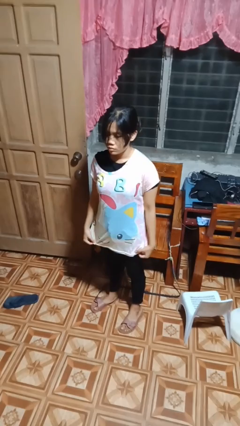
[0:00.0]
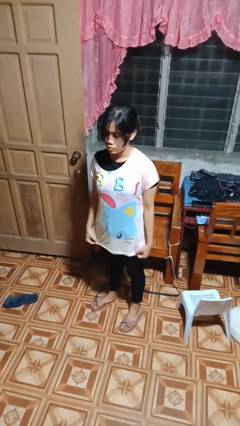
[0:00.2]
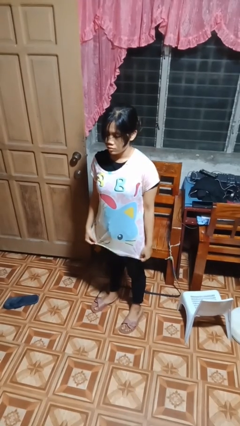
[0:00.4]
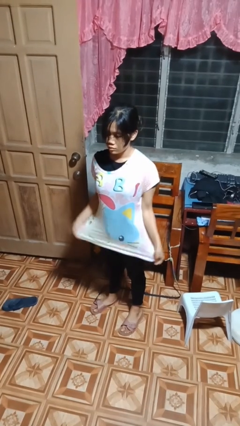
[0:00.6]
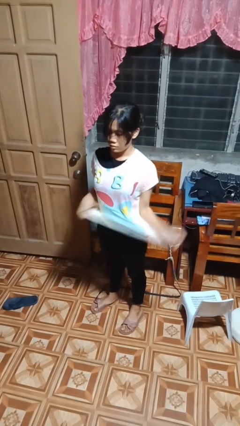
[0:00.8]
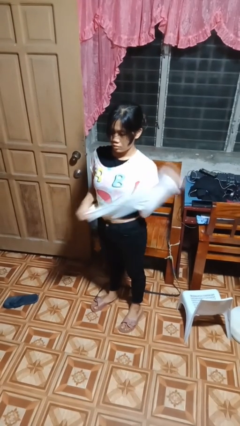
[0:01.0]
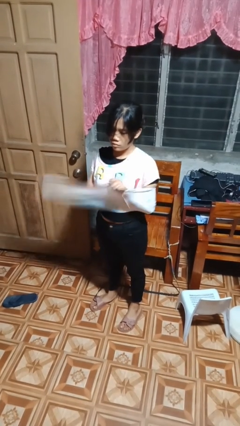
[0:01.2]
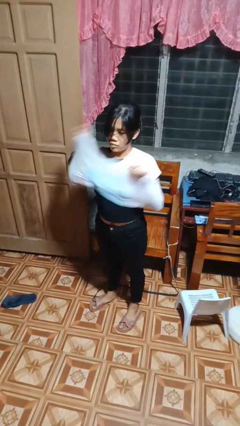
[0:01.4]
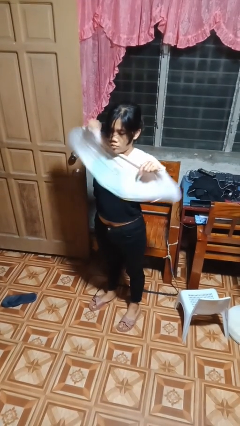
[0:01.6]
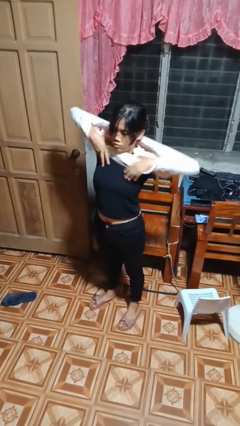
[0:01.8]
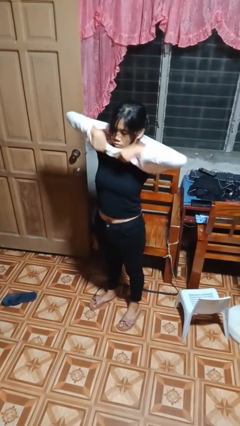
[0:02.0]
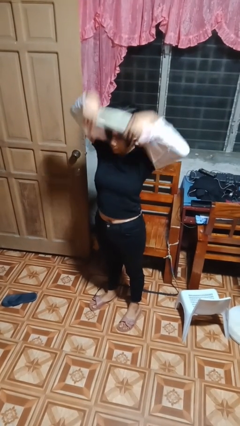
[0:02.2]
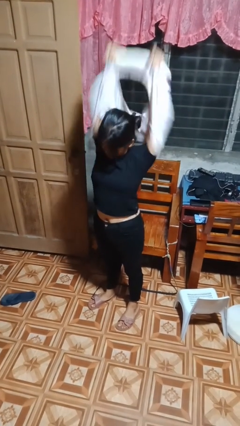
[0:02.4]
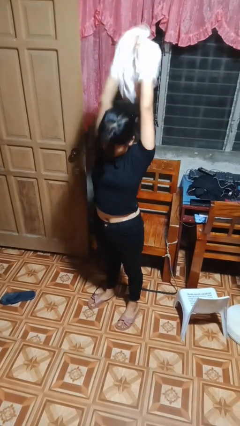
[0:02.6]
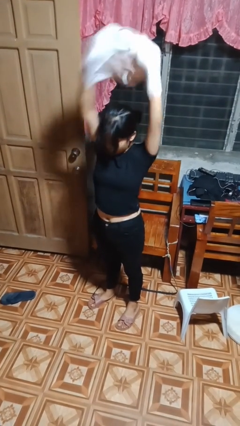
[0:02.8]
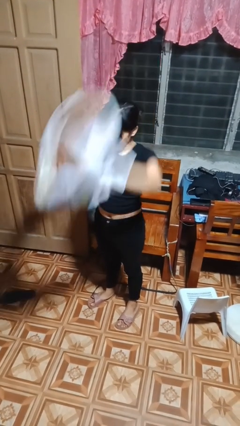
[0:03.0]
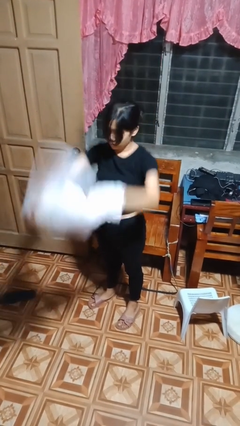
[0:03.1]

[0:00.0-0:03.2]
person takes off shirt

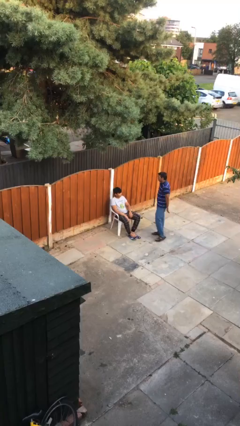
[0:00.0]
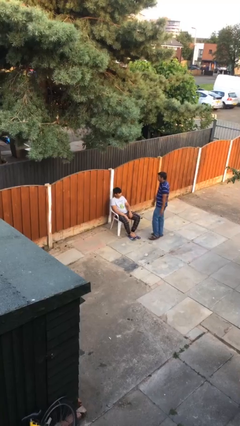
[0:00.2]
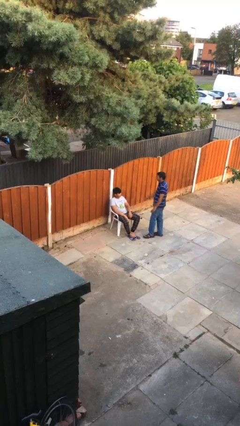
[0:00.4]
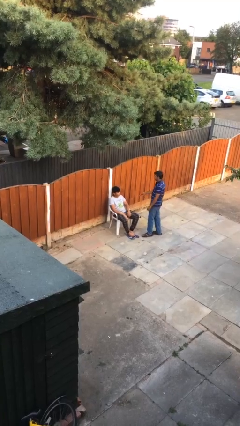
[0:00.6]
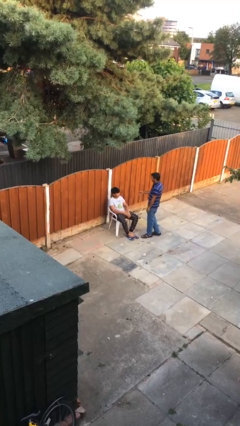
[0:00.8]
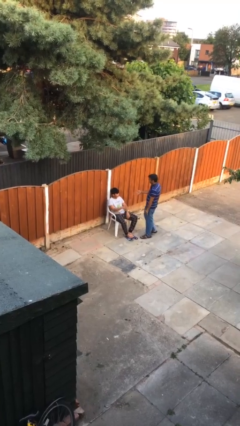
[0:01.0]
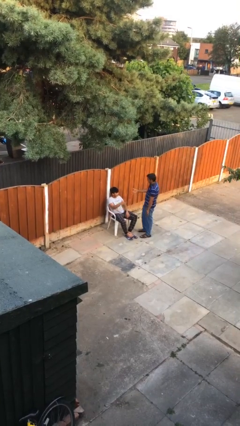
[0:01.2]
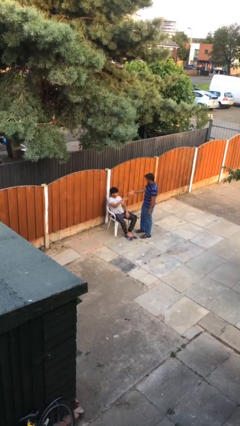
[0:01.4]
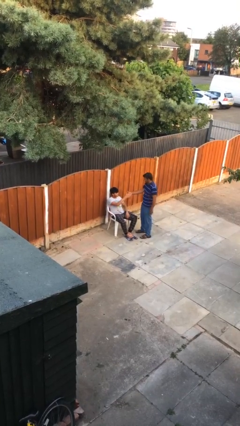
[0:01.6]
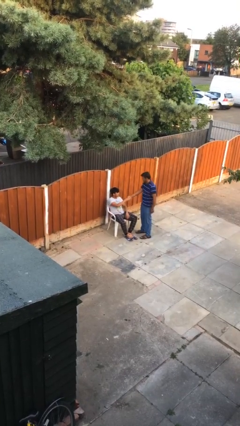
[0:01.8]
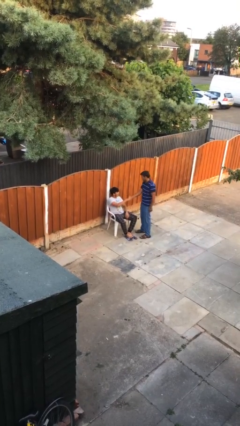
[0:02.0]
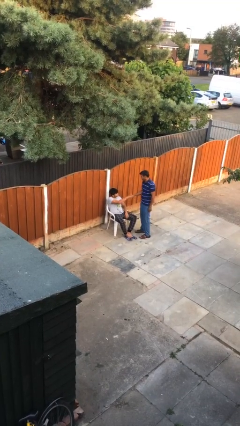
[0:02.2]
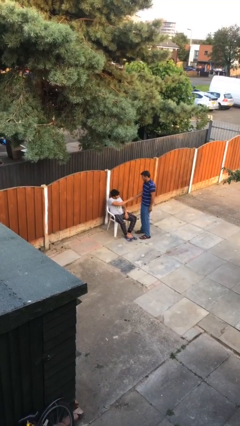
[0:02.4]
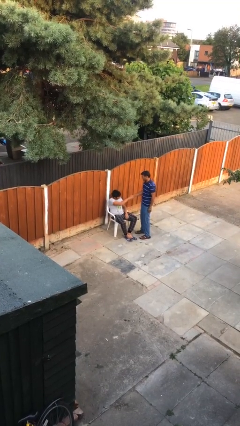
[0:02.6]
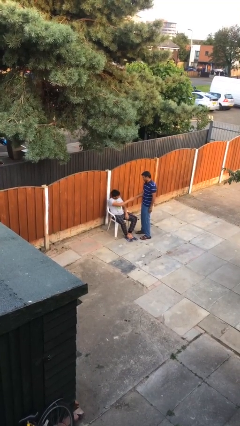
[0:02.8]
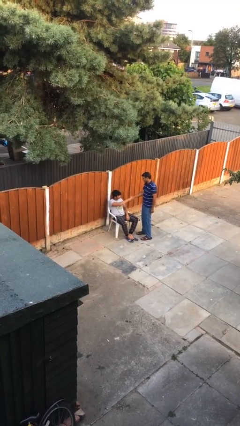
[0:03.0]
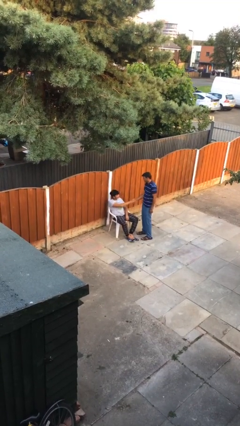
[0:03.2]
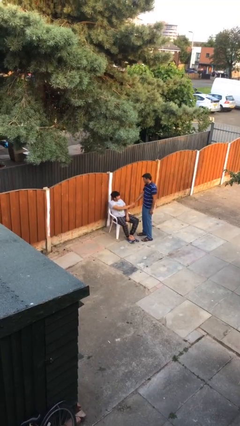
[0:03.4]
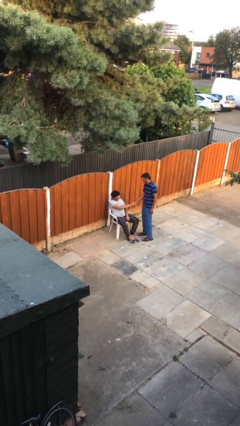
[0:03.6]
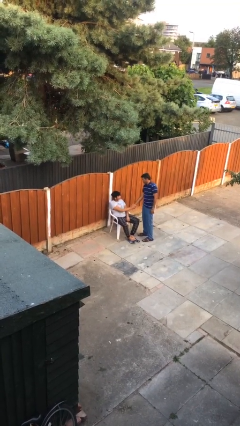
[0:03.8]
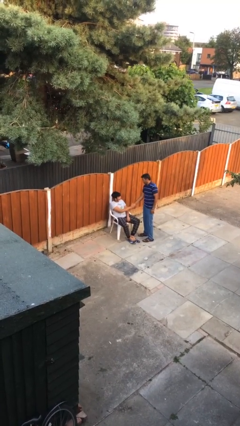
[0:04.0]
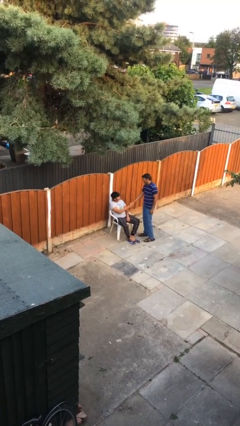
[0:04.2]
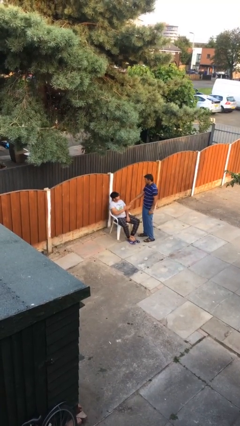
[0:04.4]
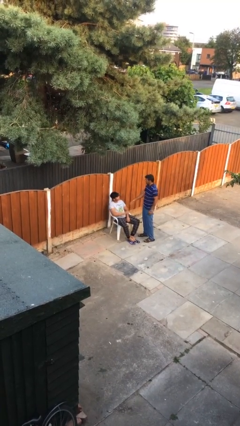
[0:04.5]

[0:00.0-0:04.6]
person shakes hand

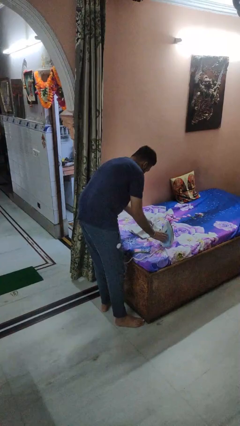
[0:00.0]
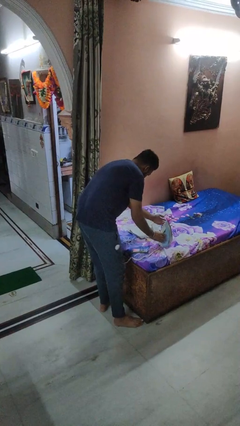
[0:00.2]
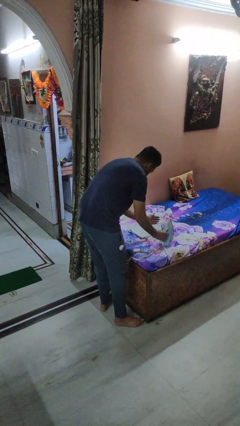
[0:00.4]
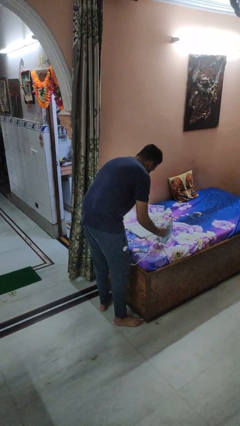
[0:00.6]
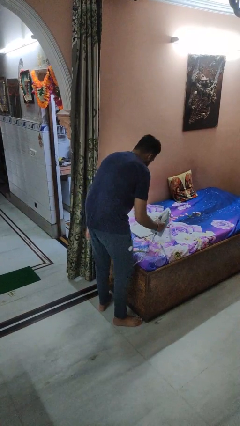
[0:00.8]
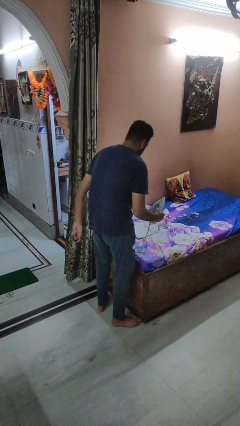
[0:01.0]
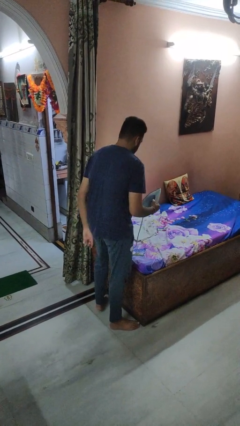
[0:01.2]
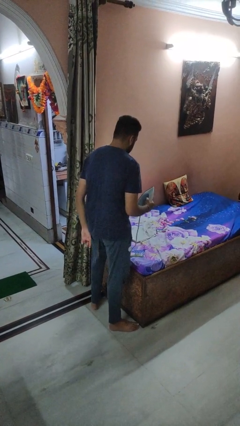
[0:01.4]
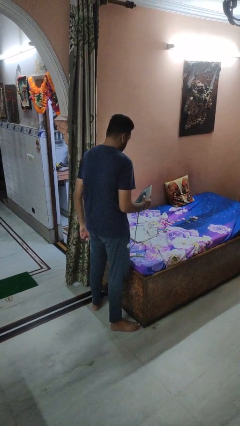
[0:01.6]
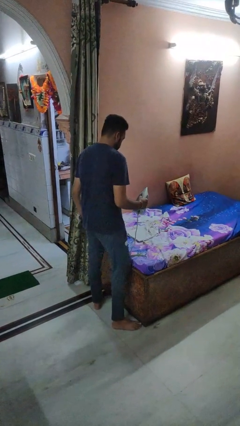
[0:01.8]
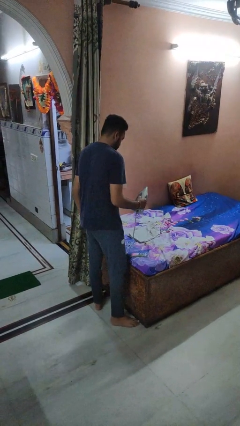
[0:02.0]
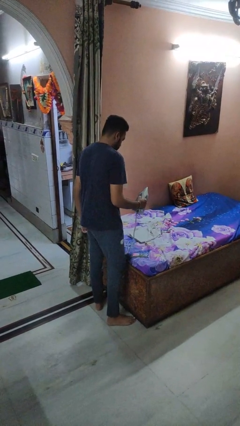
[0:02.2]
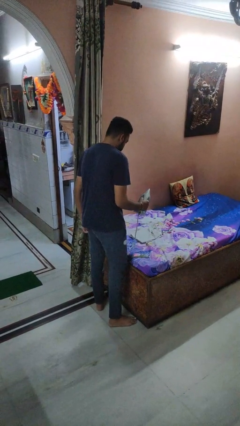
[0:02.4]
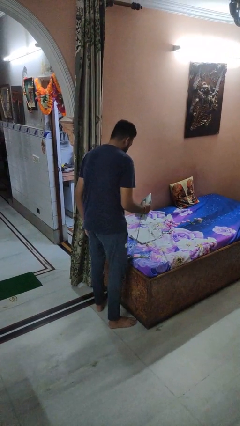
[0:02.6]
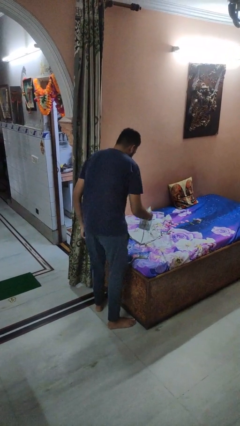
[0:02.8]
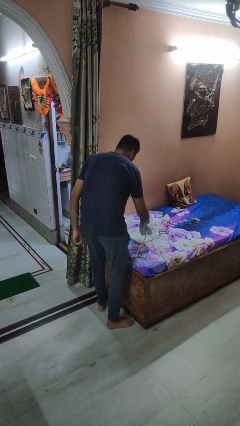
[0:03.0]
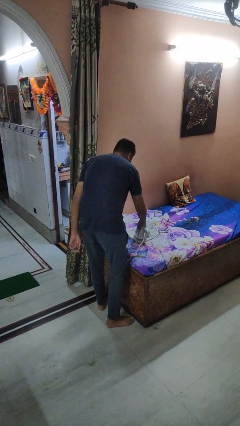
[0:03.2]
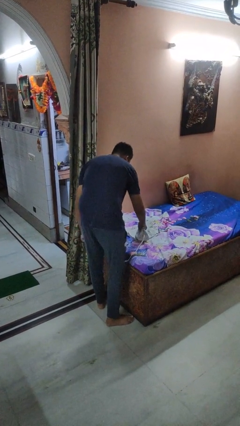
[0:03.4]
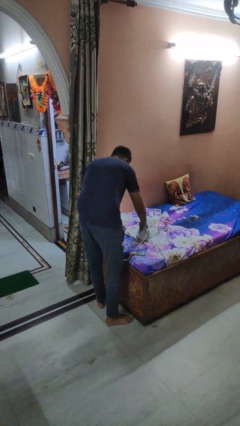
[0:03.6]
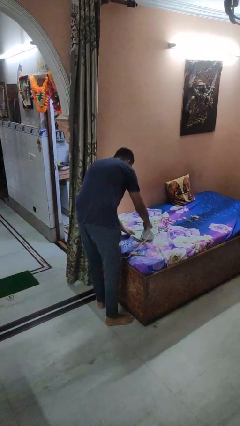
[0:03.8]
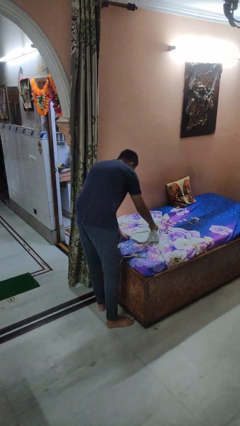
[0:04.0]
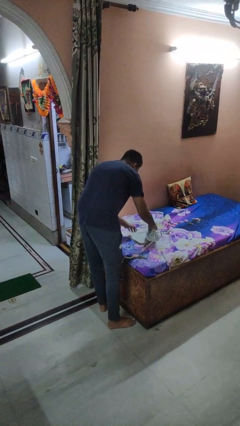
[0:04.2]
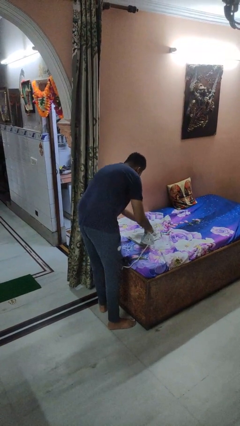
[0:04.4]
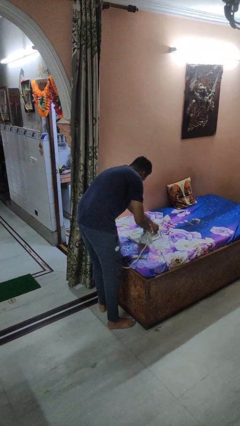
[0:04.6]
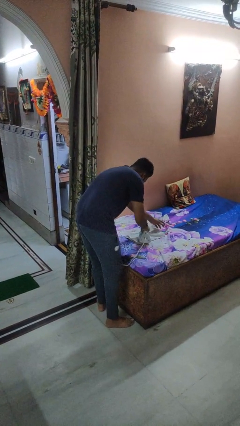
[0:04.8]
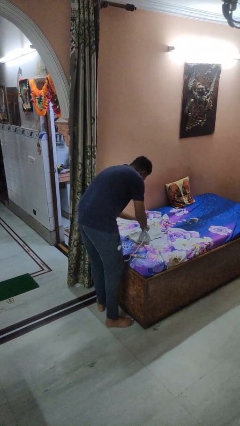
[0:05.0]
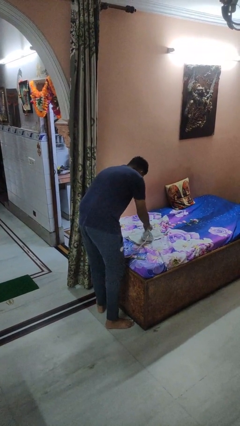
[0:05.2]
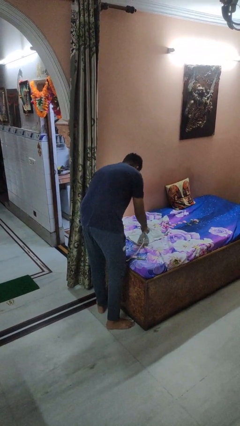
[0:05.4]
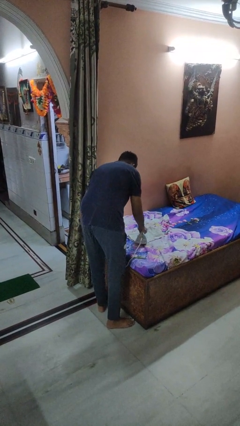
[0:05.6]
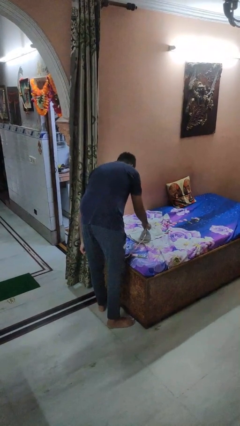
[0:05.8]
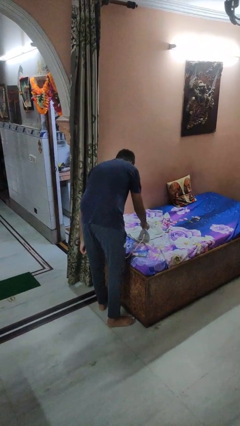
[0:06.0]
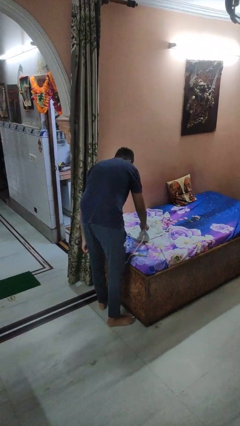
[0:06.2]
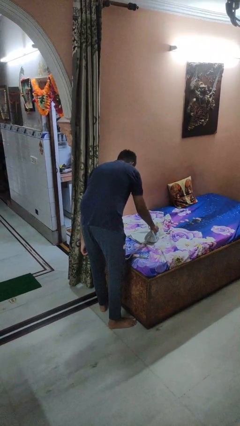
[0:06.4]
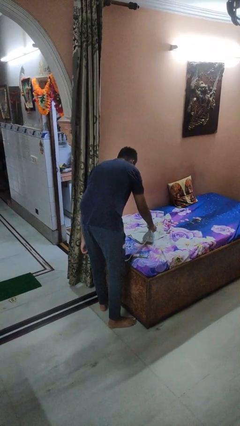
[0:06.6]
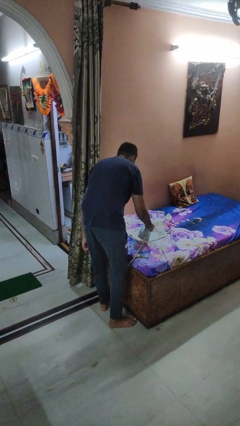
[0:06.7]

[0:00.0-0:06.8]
person irons clothes

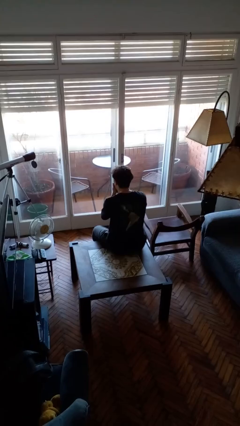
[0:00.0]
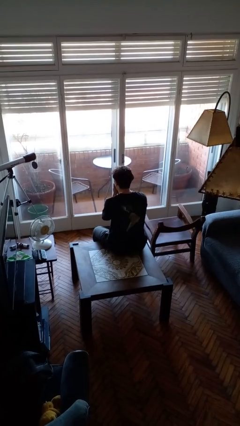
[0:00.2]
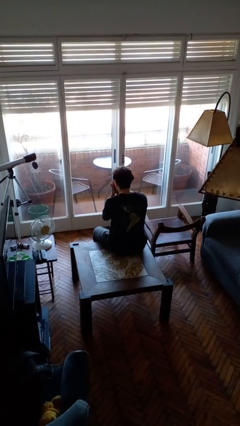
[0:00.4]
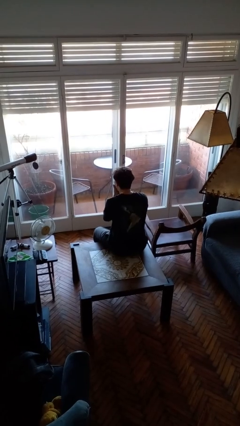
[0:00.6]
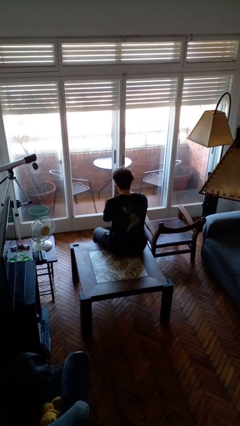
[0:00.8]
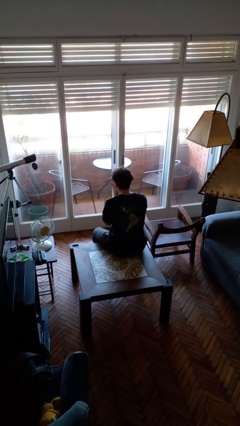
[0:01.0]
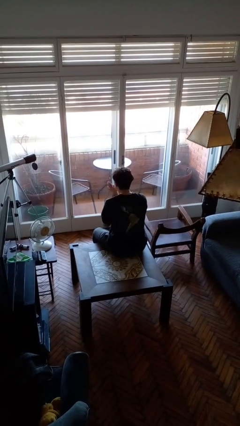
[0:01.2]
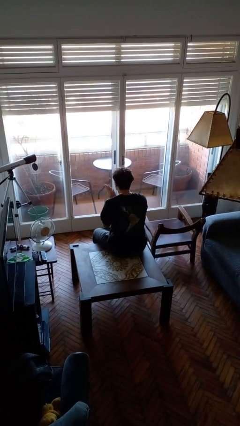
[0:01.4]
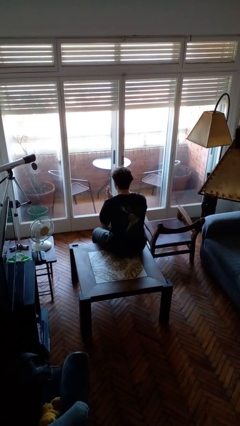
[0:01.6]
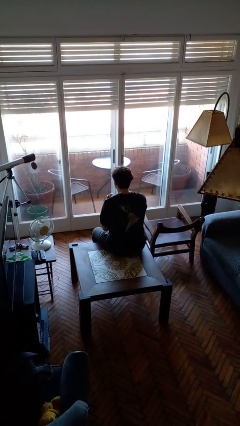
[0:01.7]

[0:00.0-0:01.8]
person blows into hands

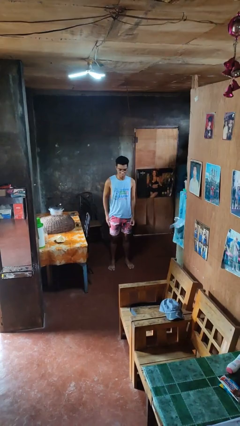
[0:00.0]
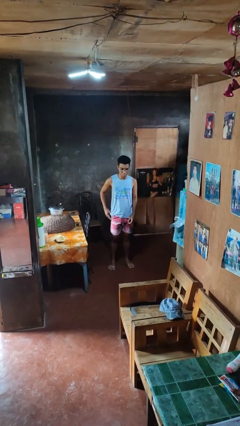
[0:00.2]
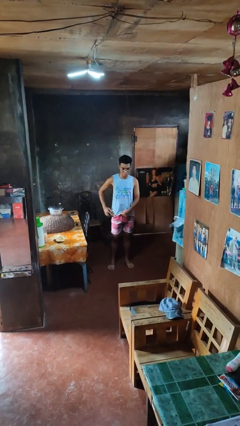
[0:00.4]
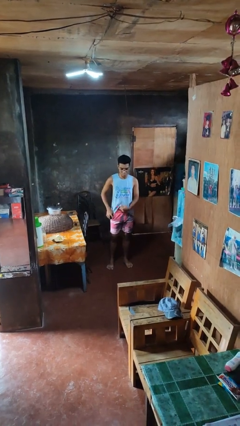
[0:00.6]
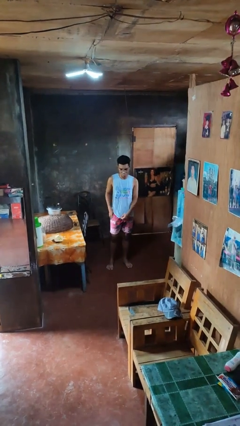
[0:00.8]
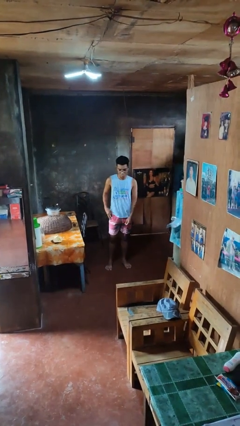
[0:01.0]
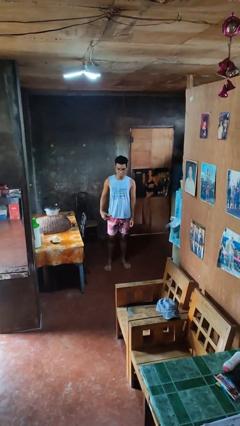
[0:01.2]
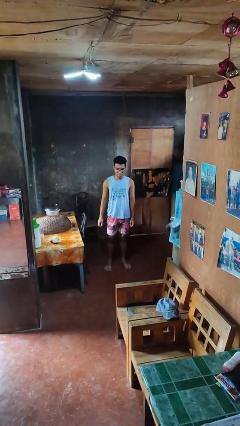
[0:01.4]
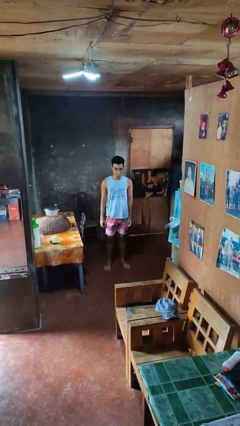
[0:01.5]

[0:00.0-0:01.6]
person puts phone into pocket
